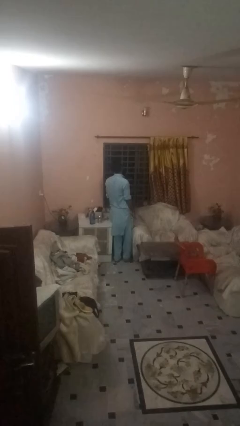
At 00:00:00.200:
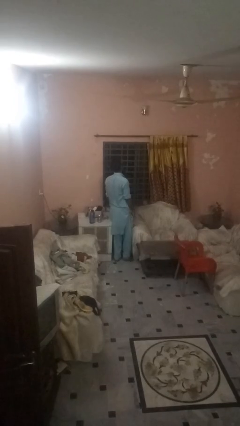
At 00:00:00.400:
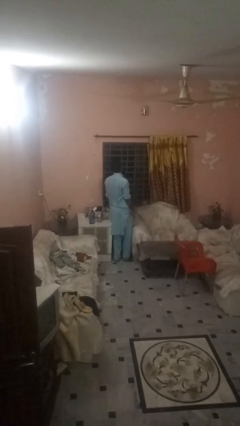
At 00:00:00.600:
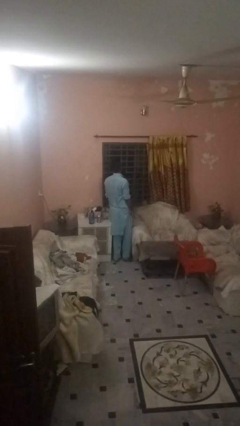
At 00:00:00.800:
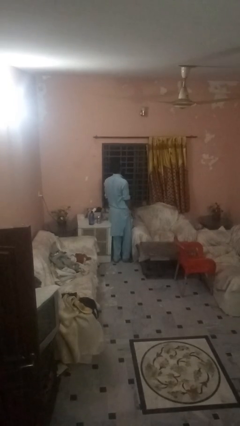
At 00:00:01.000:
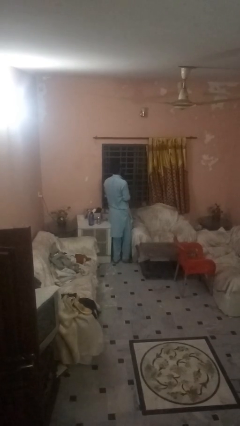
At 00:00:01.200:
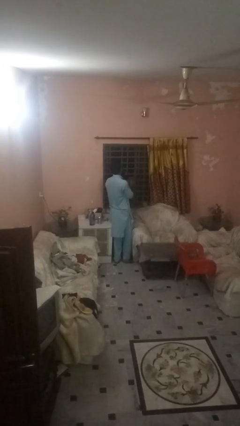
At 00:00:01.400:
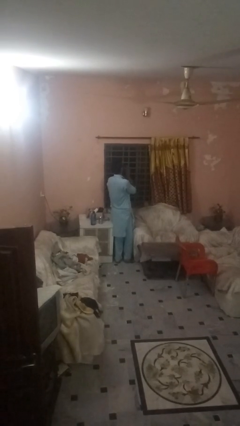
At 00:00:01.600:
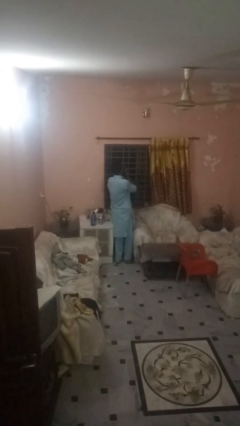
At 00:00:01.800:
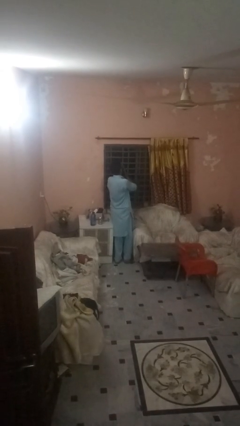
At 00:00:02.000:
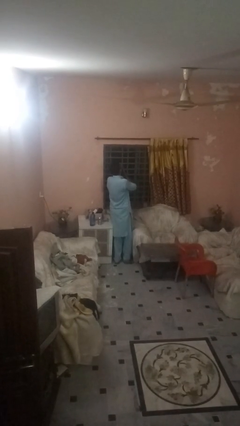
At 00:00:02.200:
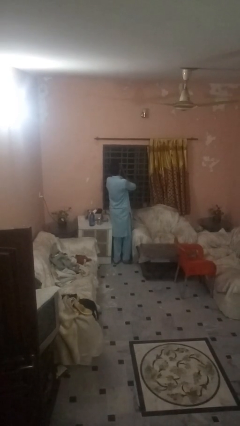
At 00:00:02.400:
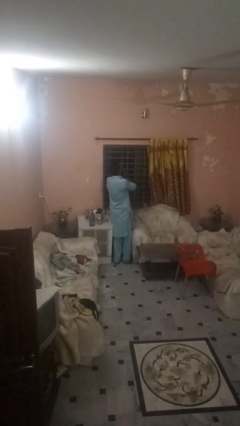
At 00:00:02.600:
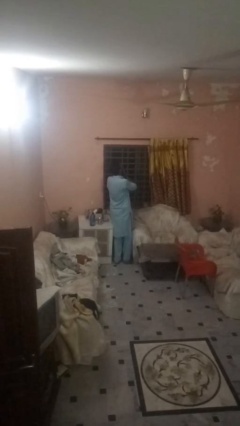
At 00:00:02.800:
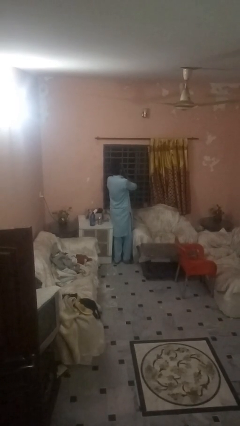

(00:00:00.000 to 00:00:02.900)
person covers face with hands

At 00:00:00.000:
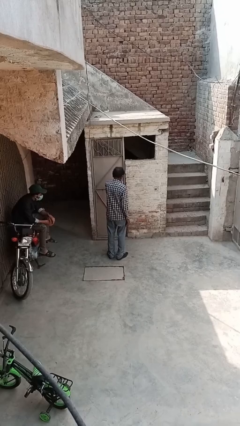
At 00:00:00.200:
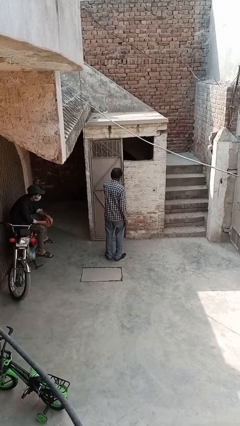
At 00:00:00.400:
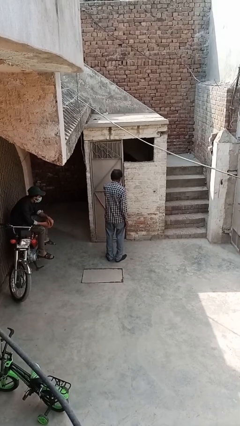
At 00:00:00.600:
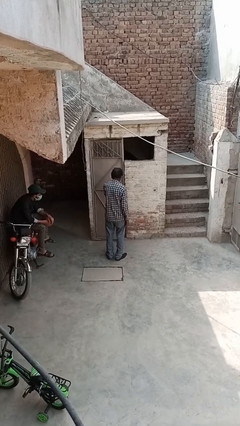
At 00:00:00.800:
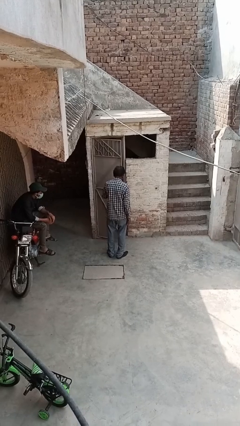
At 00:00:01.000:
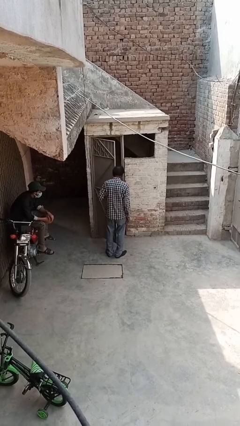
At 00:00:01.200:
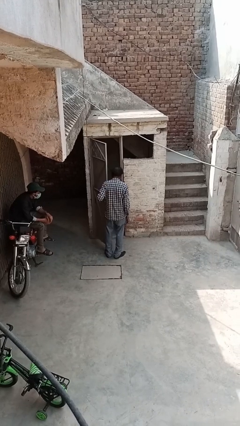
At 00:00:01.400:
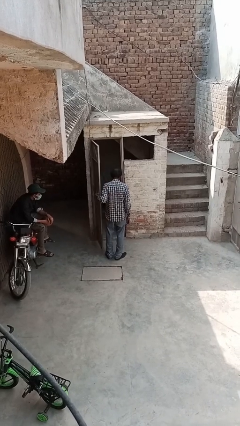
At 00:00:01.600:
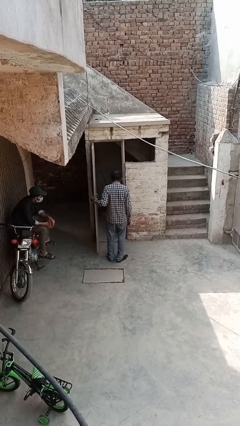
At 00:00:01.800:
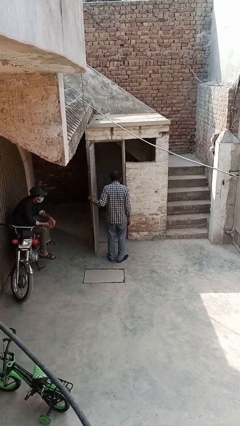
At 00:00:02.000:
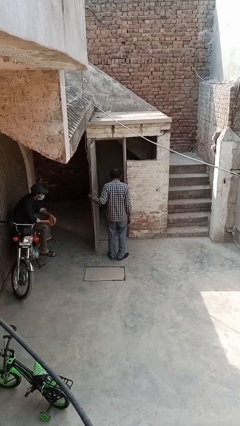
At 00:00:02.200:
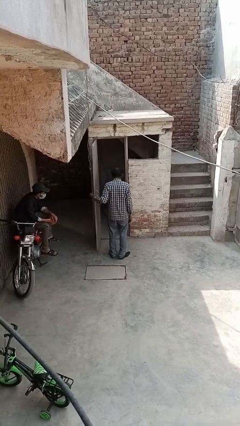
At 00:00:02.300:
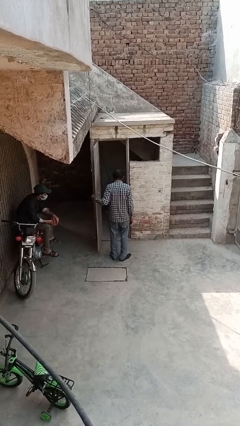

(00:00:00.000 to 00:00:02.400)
person opens facility door

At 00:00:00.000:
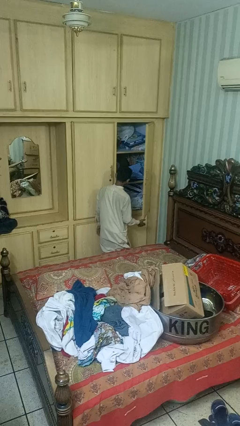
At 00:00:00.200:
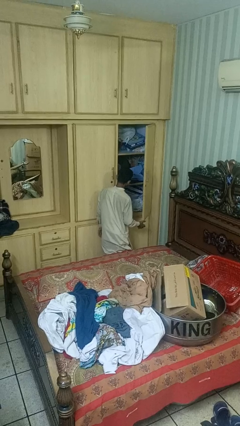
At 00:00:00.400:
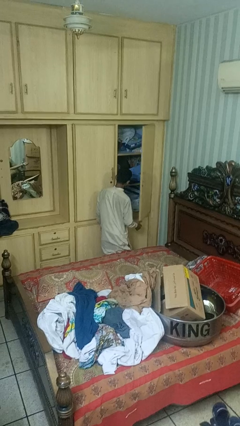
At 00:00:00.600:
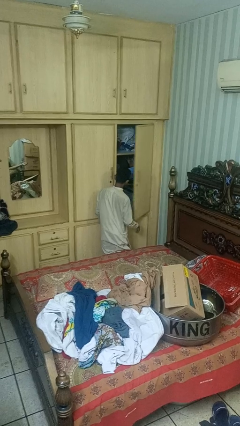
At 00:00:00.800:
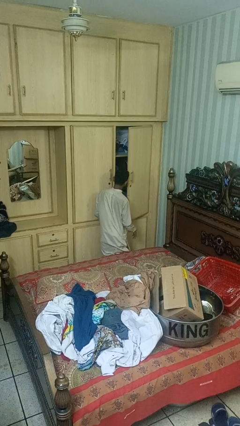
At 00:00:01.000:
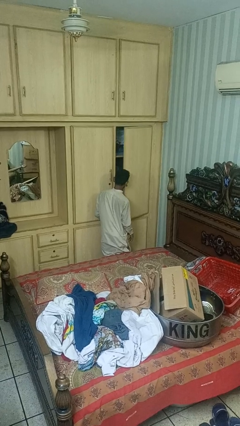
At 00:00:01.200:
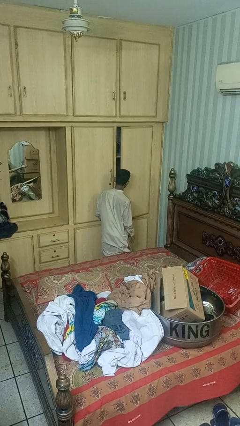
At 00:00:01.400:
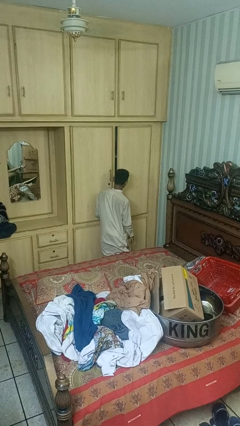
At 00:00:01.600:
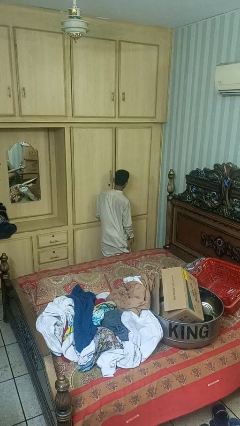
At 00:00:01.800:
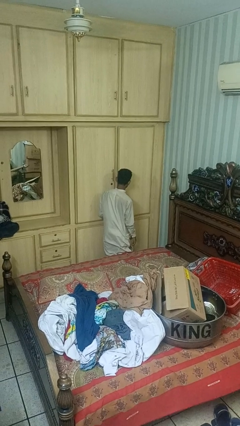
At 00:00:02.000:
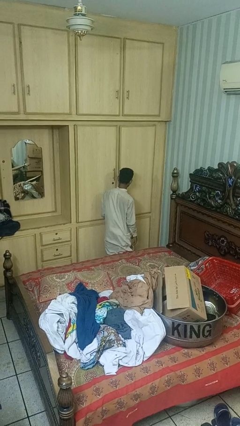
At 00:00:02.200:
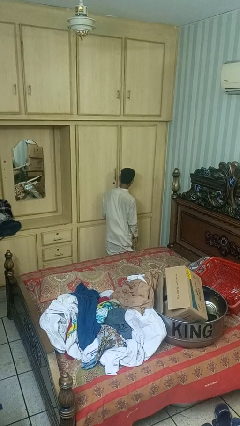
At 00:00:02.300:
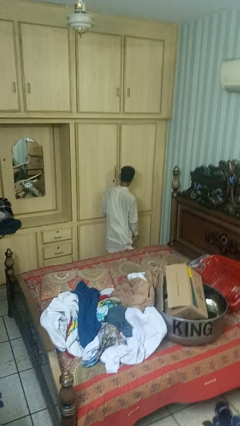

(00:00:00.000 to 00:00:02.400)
person closes closet door

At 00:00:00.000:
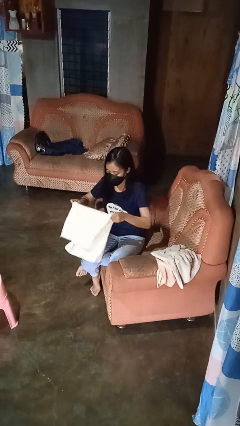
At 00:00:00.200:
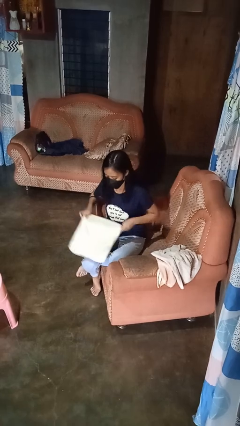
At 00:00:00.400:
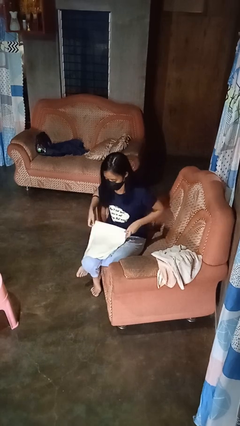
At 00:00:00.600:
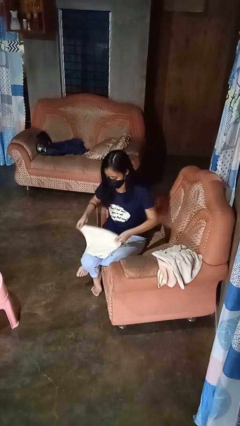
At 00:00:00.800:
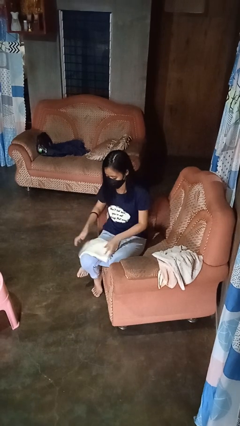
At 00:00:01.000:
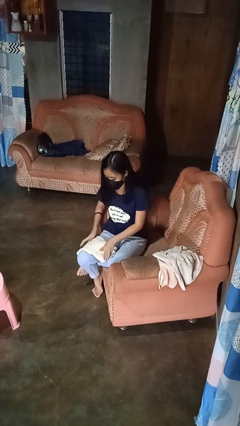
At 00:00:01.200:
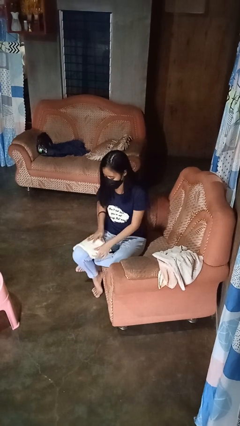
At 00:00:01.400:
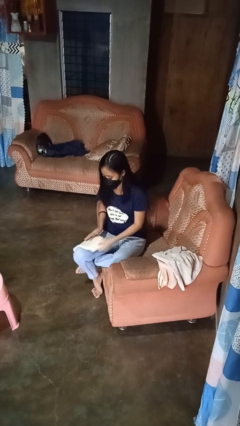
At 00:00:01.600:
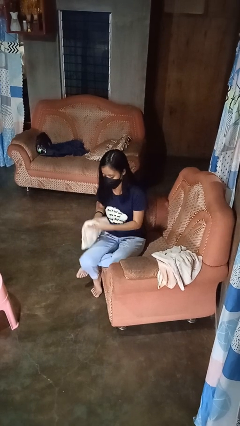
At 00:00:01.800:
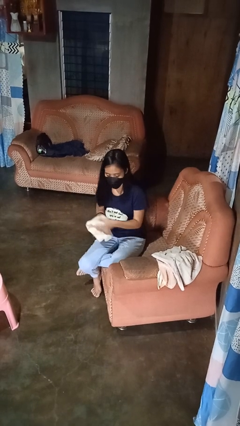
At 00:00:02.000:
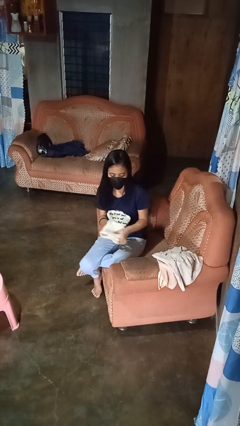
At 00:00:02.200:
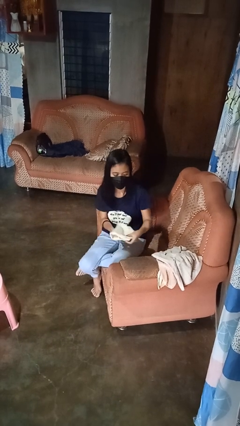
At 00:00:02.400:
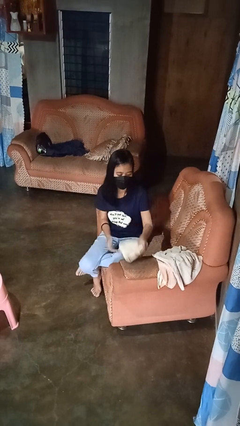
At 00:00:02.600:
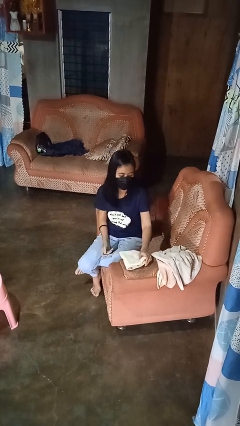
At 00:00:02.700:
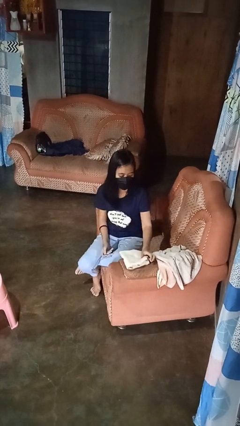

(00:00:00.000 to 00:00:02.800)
person folds towel

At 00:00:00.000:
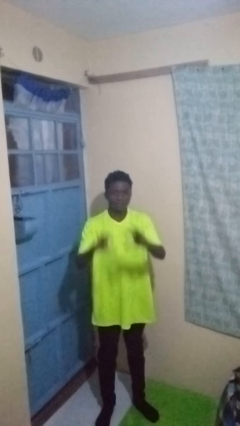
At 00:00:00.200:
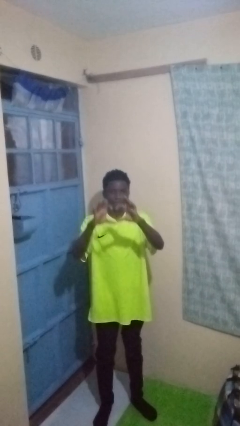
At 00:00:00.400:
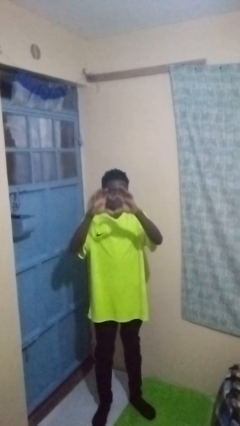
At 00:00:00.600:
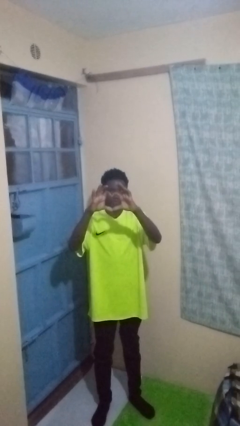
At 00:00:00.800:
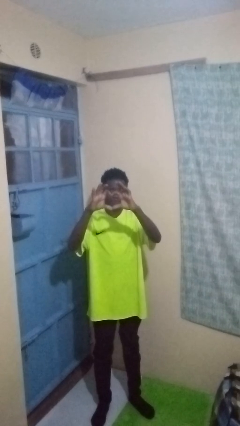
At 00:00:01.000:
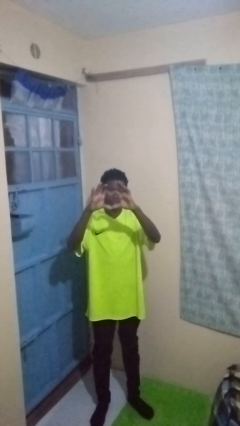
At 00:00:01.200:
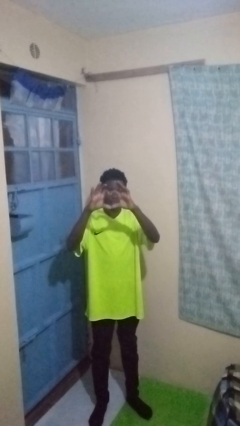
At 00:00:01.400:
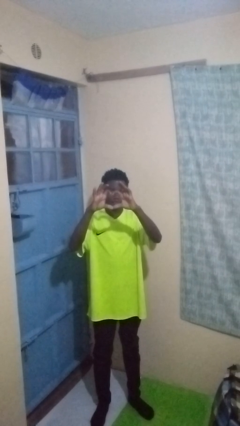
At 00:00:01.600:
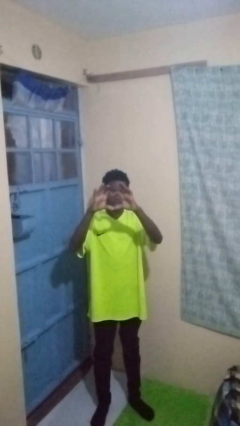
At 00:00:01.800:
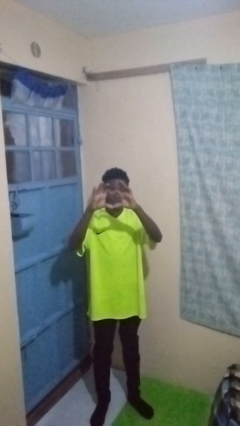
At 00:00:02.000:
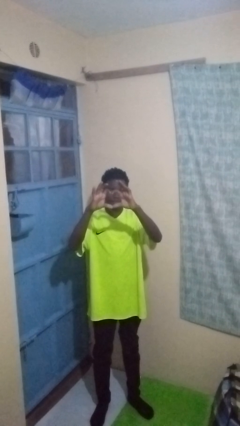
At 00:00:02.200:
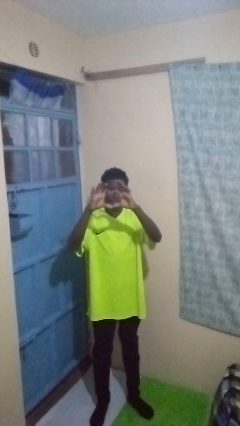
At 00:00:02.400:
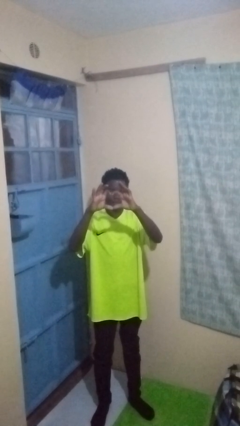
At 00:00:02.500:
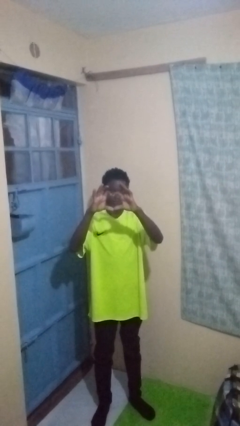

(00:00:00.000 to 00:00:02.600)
person gestures heart

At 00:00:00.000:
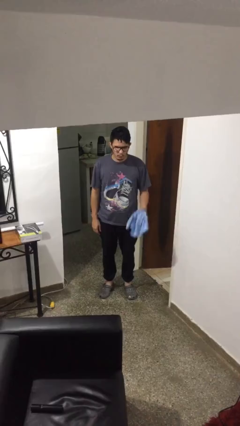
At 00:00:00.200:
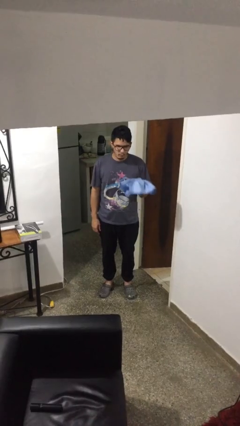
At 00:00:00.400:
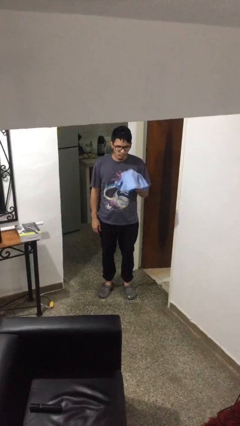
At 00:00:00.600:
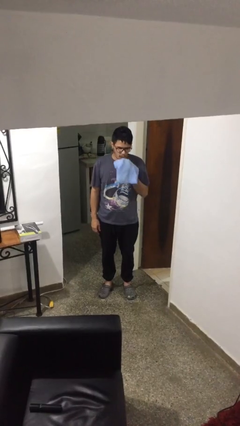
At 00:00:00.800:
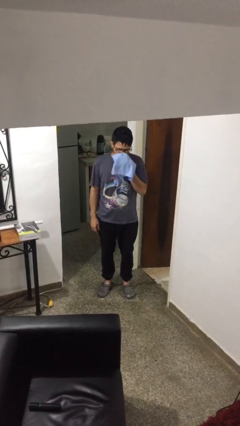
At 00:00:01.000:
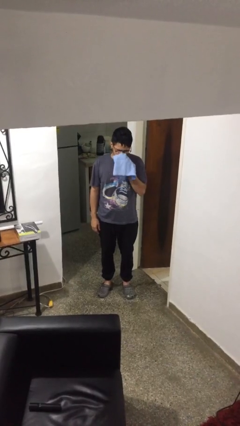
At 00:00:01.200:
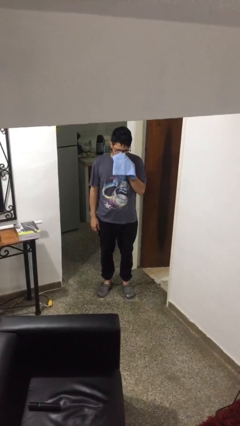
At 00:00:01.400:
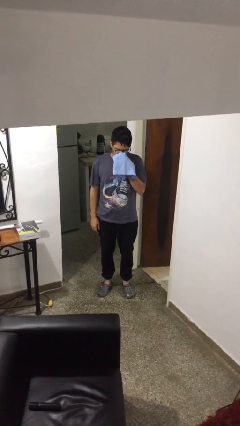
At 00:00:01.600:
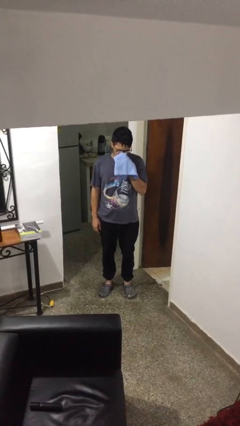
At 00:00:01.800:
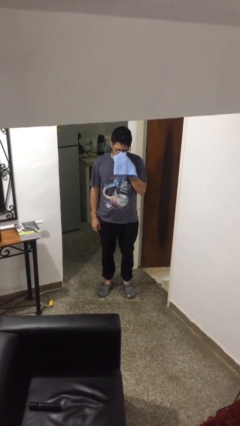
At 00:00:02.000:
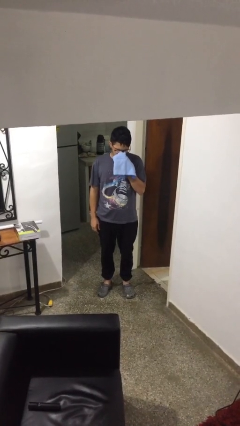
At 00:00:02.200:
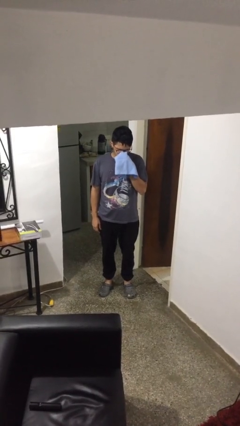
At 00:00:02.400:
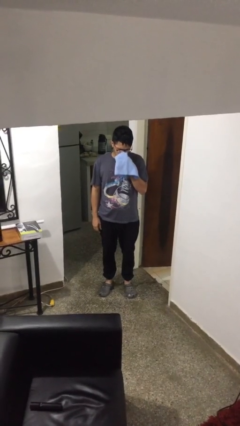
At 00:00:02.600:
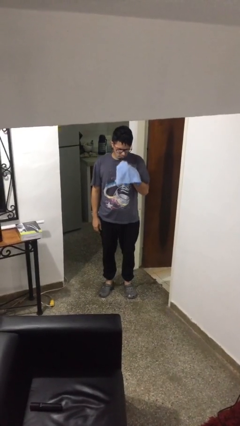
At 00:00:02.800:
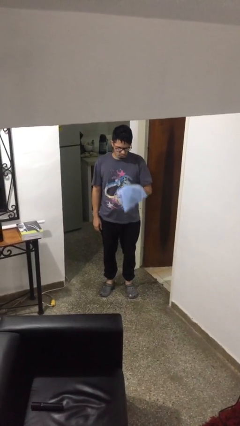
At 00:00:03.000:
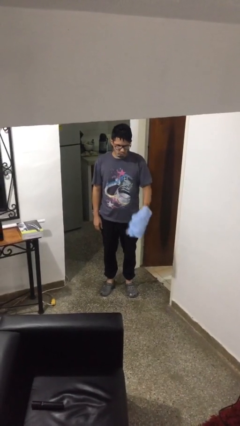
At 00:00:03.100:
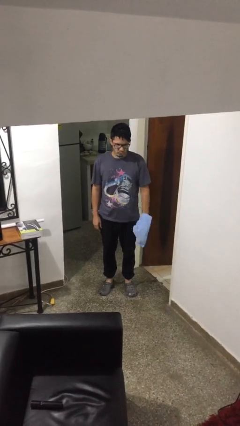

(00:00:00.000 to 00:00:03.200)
person blows nose

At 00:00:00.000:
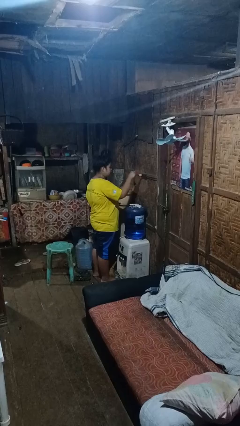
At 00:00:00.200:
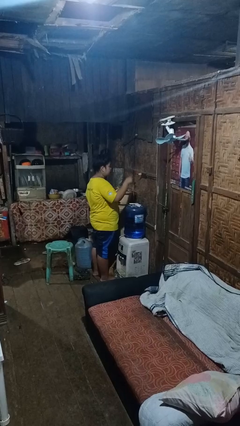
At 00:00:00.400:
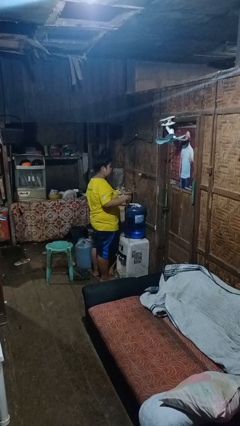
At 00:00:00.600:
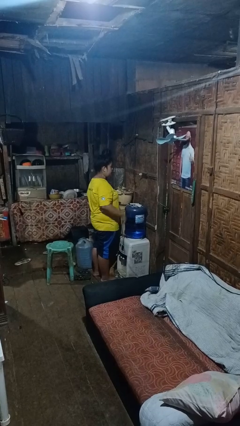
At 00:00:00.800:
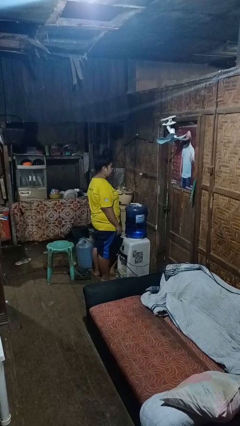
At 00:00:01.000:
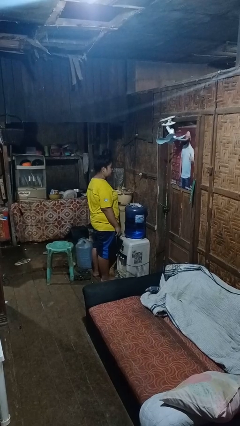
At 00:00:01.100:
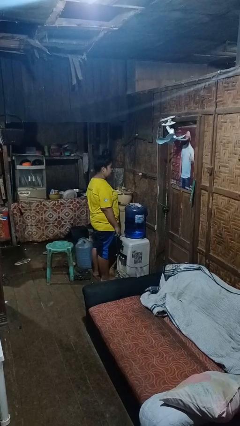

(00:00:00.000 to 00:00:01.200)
person unplugs from electrical socket
